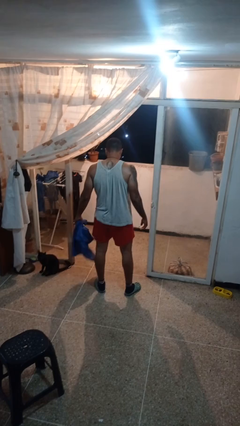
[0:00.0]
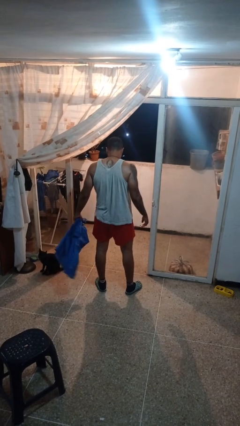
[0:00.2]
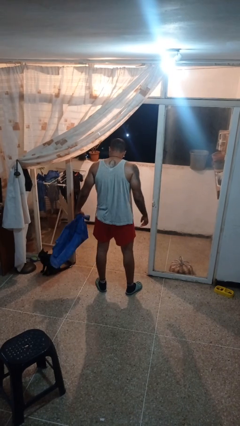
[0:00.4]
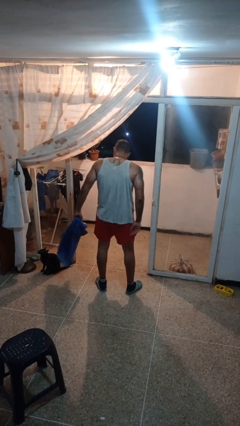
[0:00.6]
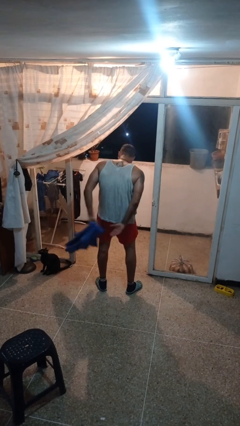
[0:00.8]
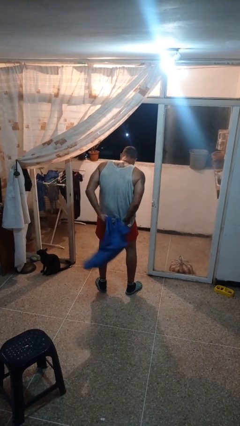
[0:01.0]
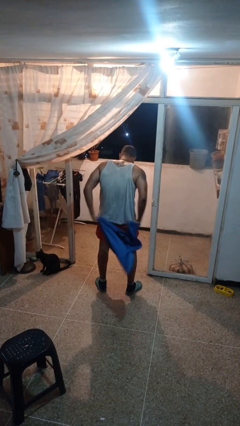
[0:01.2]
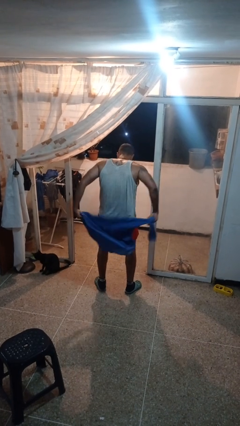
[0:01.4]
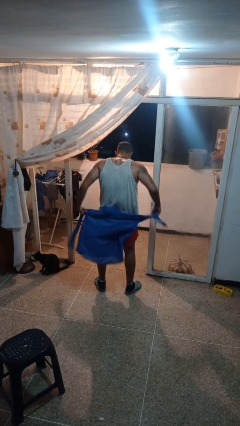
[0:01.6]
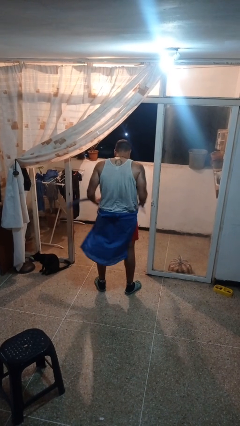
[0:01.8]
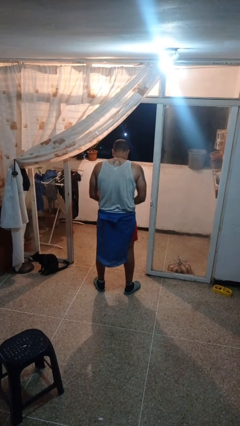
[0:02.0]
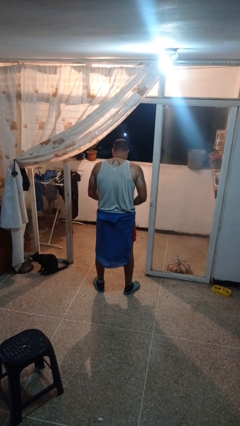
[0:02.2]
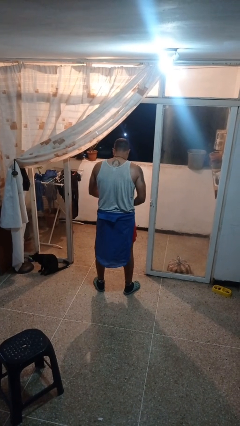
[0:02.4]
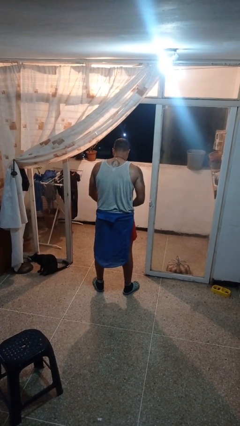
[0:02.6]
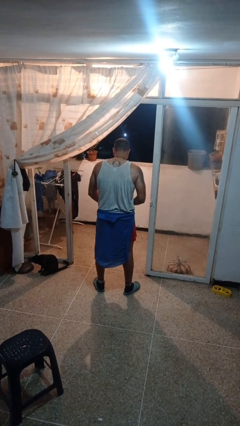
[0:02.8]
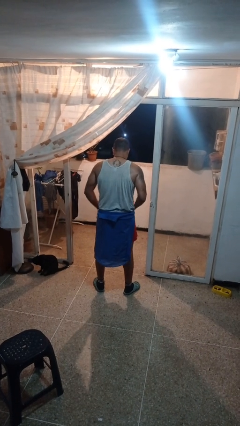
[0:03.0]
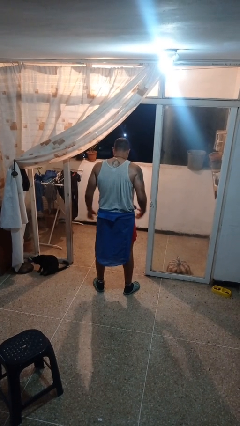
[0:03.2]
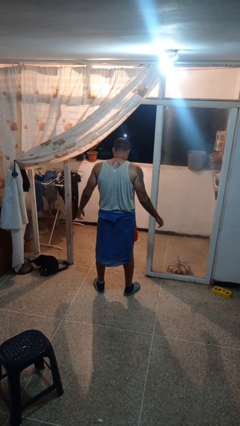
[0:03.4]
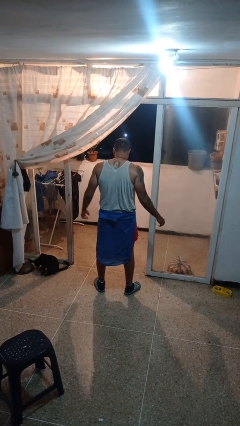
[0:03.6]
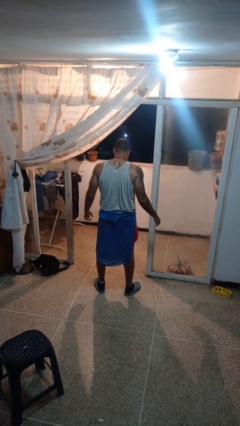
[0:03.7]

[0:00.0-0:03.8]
person ties jacket around waist

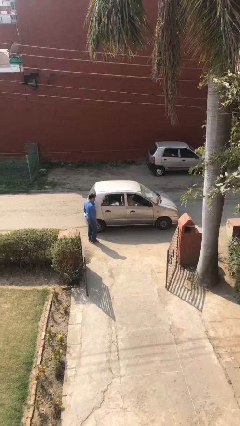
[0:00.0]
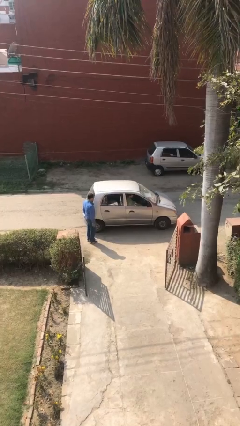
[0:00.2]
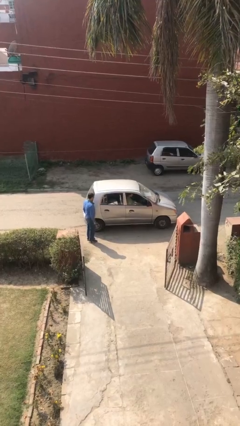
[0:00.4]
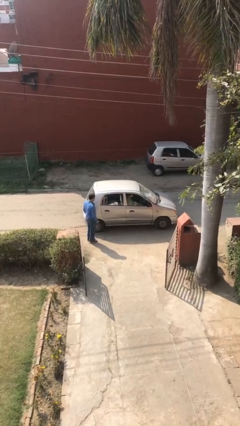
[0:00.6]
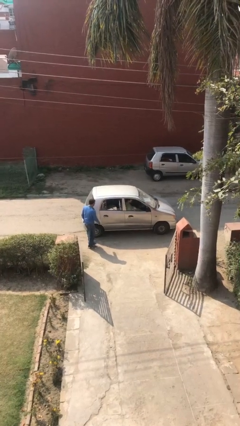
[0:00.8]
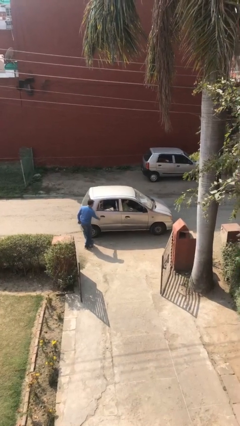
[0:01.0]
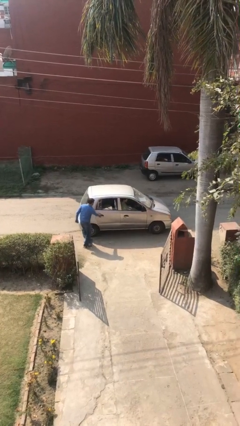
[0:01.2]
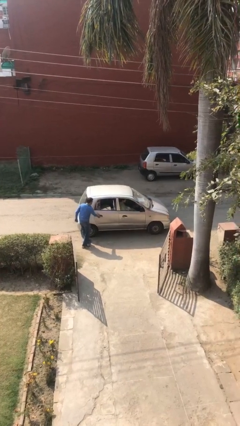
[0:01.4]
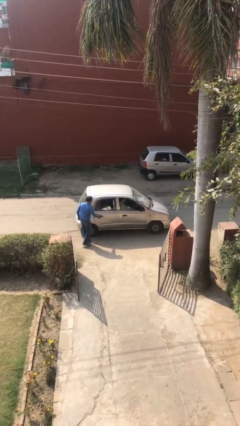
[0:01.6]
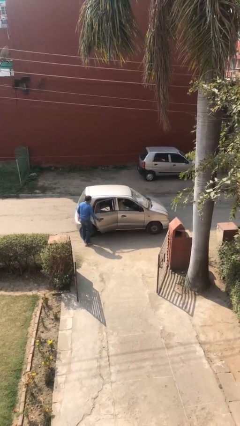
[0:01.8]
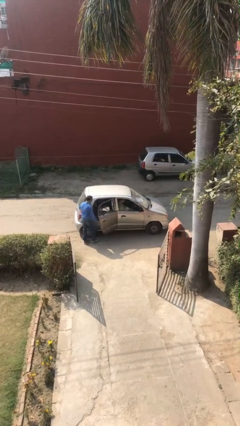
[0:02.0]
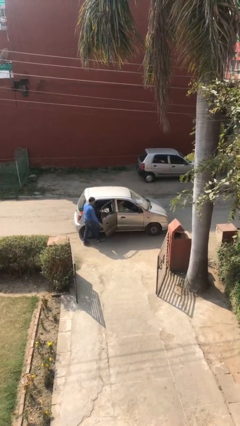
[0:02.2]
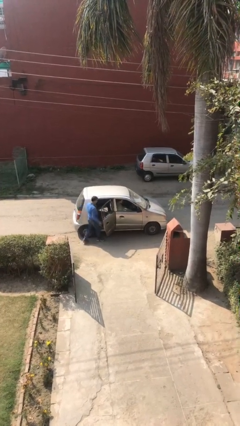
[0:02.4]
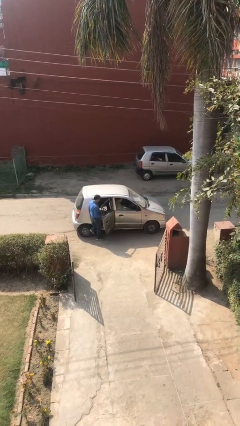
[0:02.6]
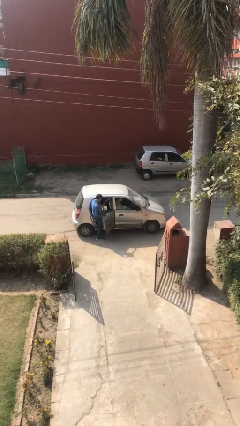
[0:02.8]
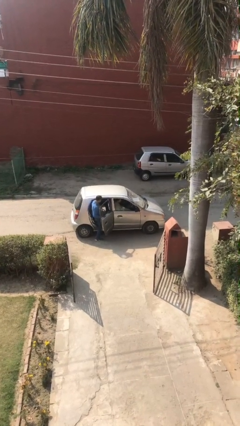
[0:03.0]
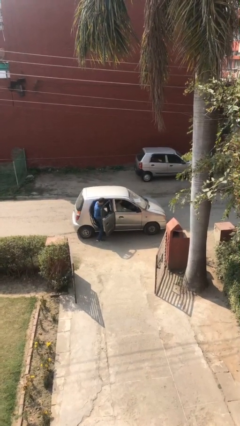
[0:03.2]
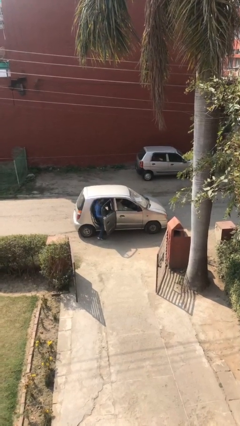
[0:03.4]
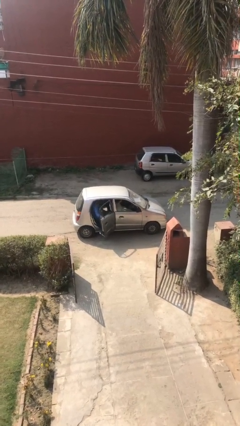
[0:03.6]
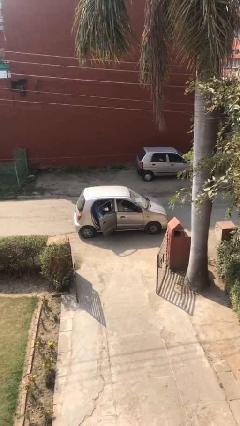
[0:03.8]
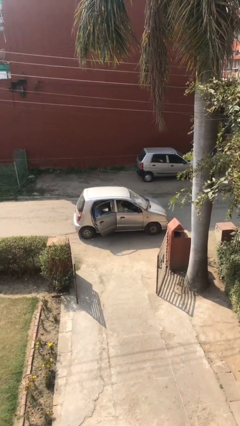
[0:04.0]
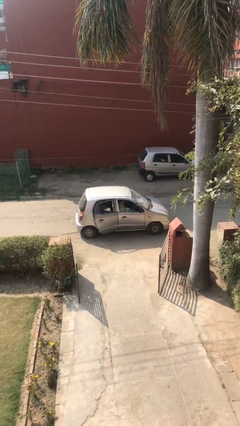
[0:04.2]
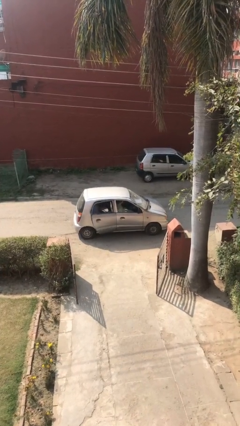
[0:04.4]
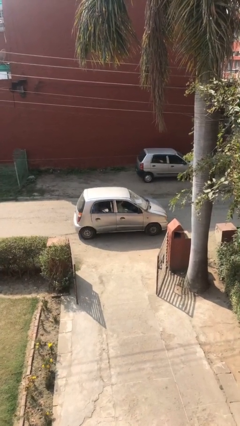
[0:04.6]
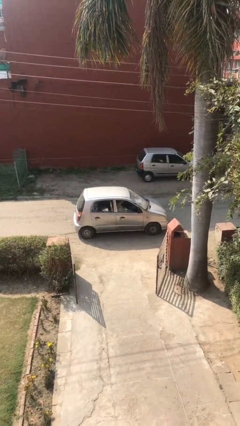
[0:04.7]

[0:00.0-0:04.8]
car picks up person

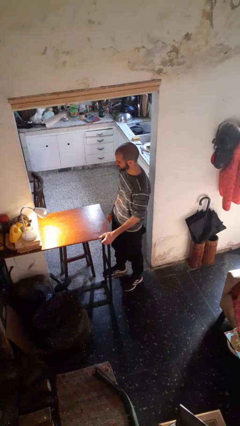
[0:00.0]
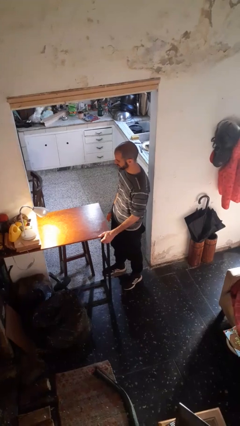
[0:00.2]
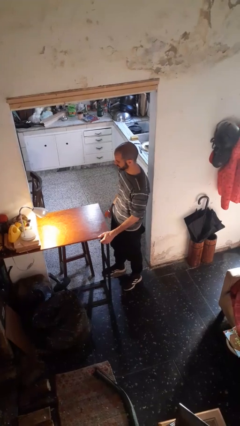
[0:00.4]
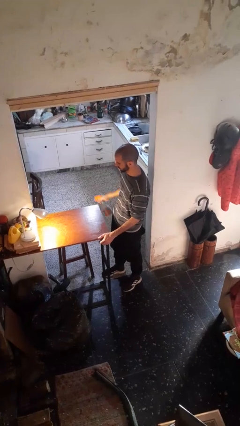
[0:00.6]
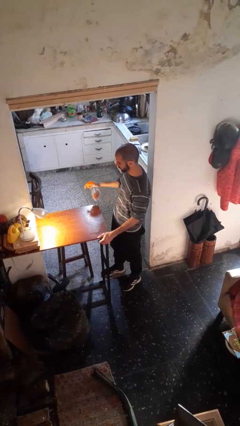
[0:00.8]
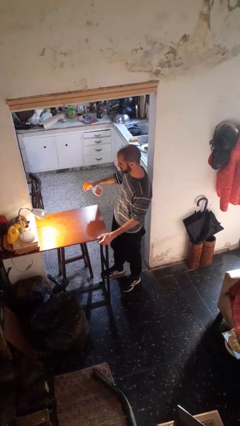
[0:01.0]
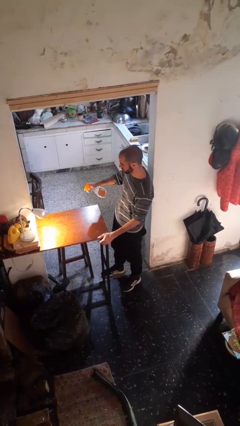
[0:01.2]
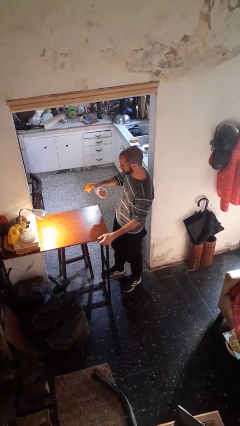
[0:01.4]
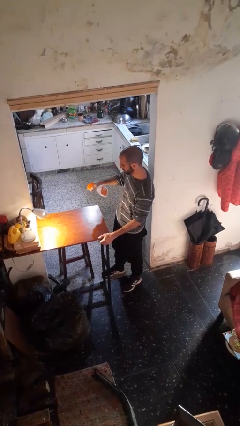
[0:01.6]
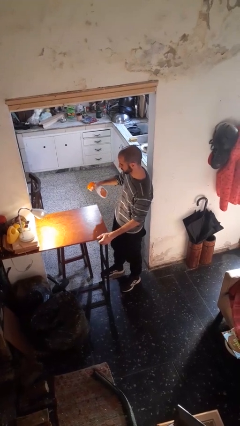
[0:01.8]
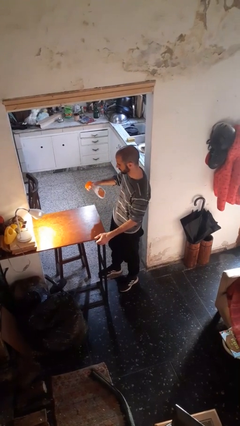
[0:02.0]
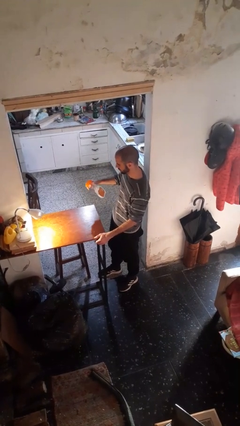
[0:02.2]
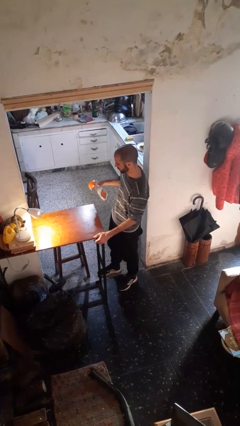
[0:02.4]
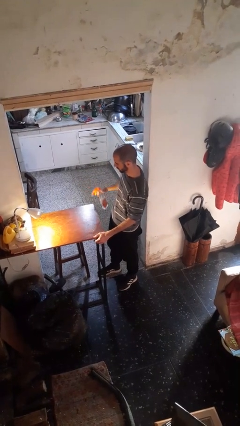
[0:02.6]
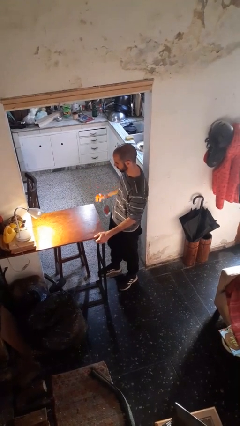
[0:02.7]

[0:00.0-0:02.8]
person sprays from bottle

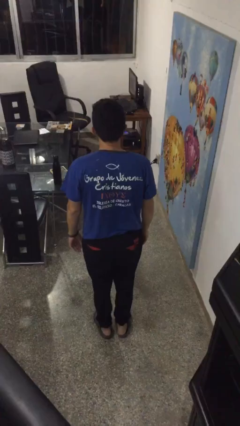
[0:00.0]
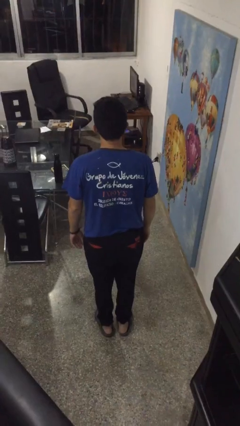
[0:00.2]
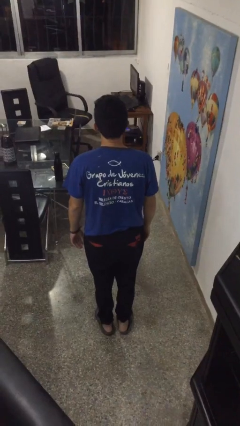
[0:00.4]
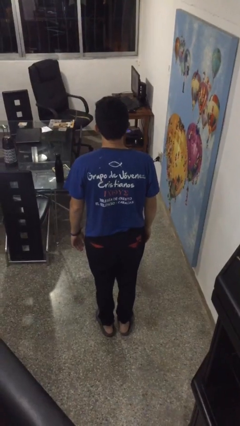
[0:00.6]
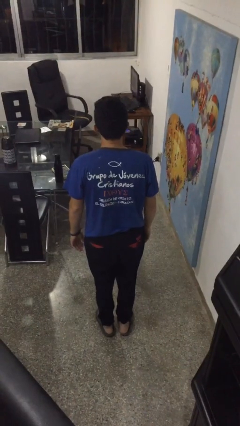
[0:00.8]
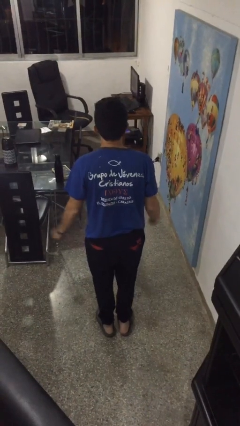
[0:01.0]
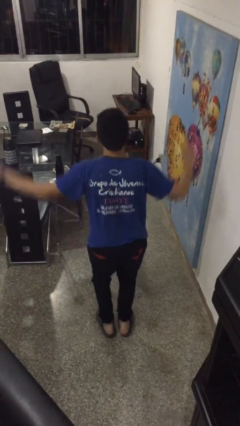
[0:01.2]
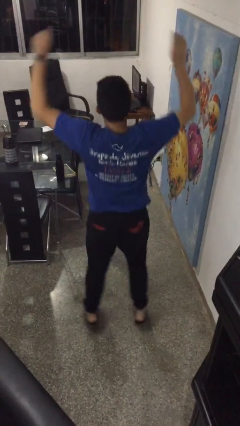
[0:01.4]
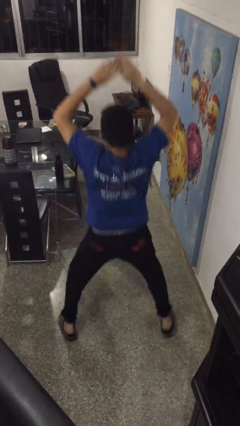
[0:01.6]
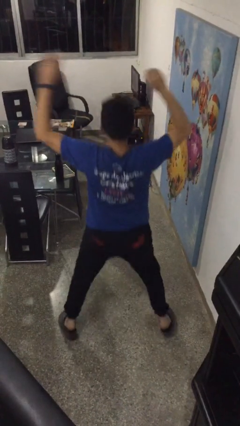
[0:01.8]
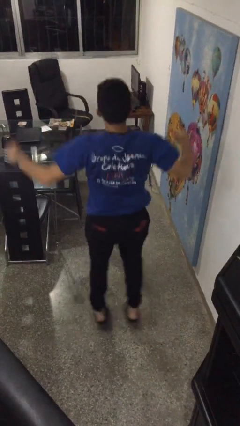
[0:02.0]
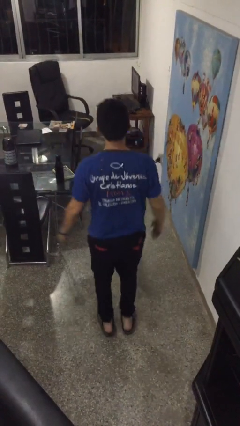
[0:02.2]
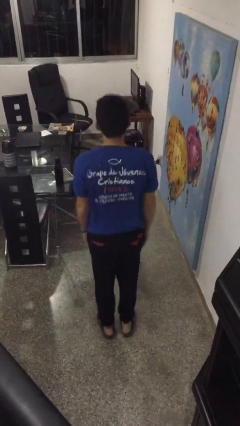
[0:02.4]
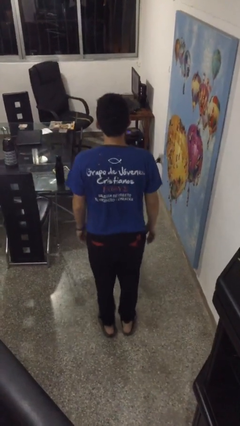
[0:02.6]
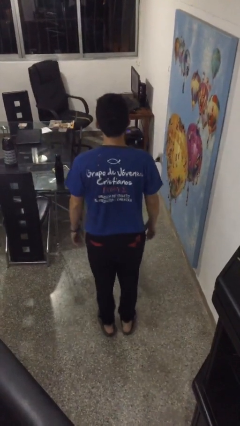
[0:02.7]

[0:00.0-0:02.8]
person exercises with jumping jacks

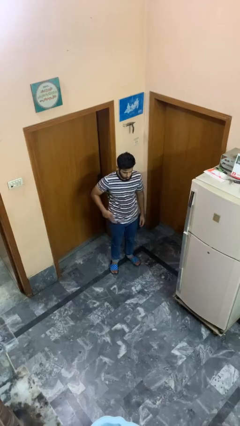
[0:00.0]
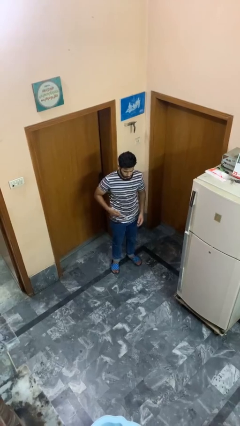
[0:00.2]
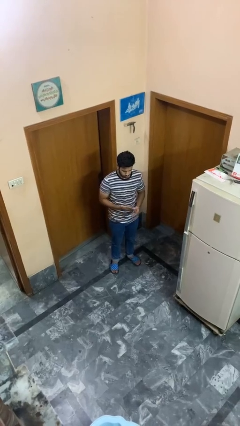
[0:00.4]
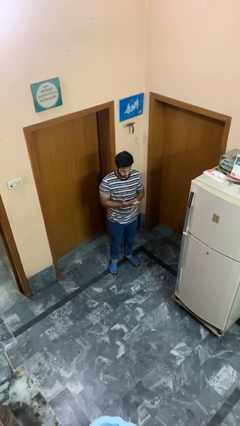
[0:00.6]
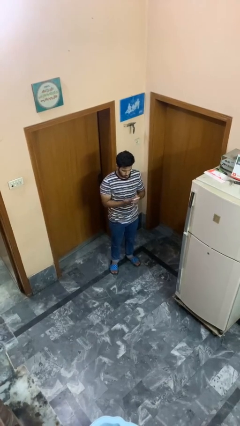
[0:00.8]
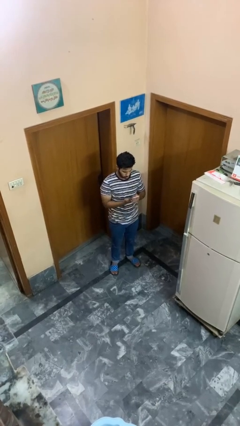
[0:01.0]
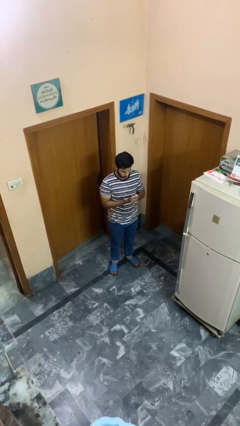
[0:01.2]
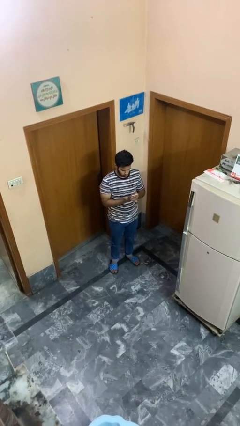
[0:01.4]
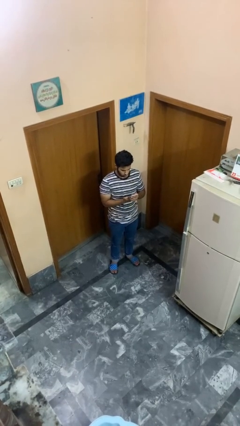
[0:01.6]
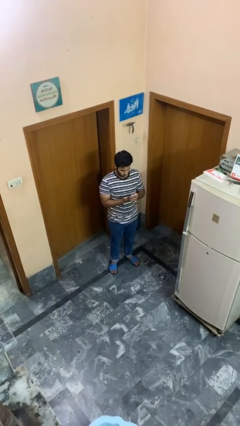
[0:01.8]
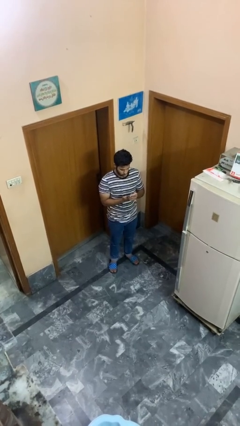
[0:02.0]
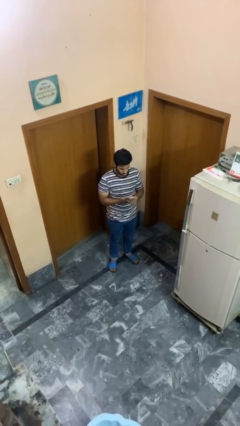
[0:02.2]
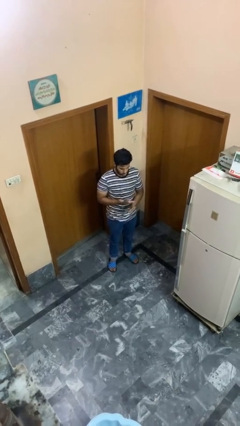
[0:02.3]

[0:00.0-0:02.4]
person takes phone from pocket

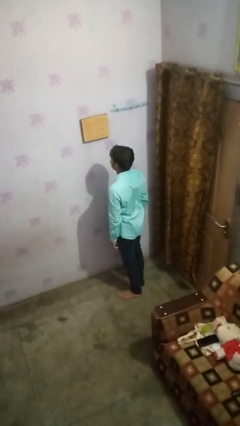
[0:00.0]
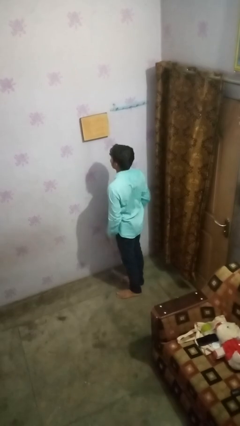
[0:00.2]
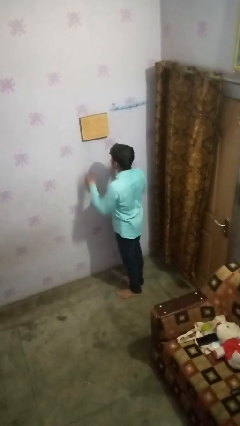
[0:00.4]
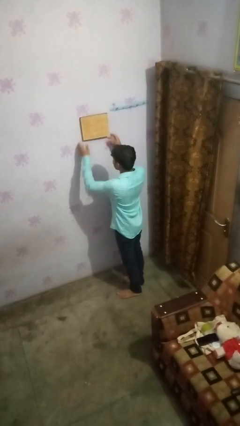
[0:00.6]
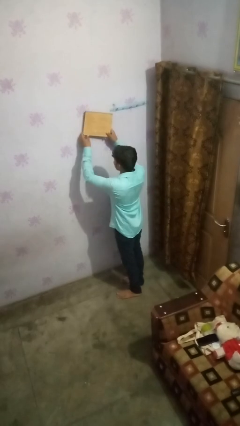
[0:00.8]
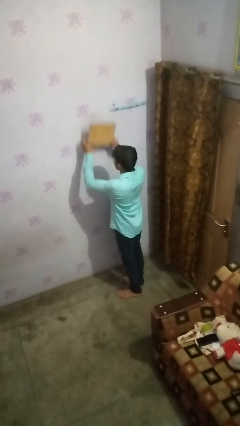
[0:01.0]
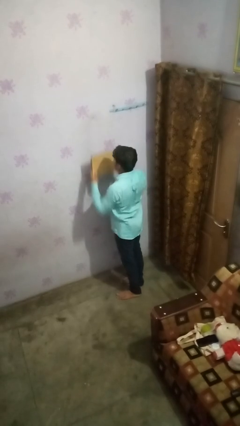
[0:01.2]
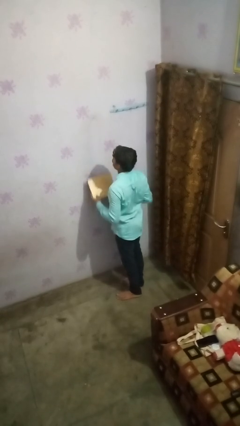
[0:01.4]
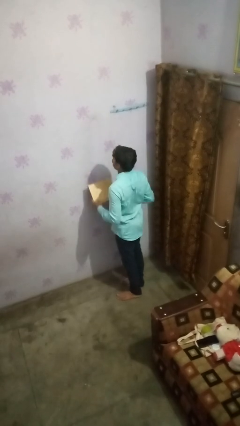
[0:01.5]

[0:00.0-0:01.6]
person takes down picture frame
